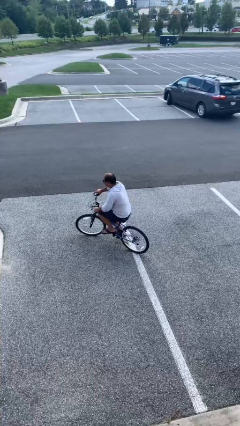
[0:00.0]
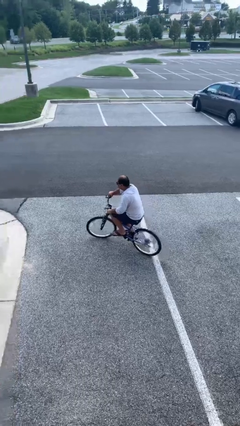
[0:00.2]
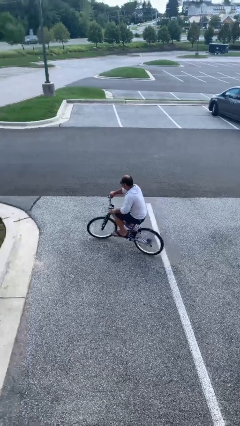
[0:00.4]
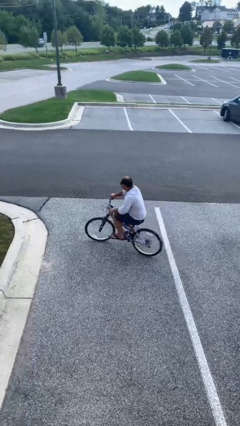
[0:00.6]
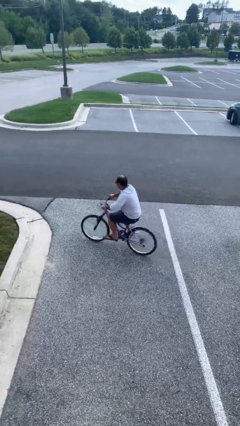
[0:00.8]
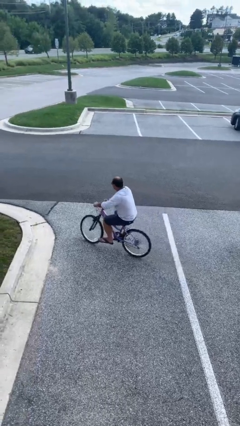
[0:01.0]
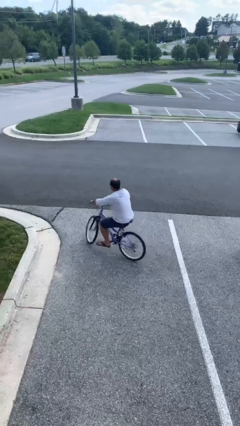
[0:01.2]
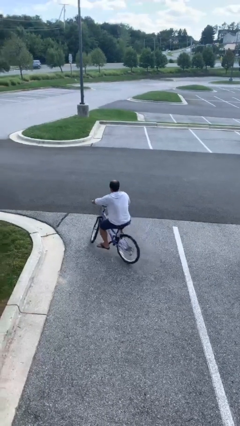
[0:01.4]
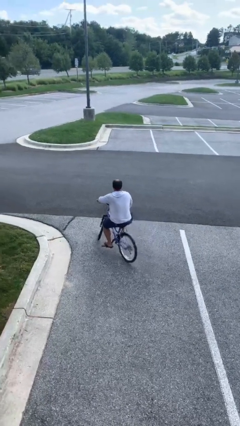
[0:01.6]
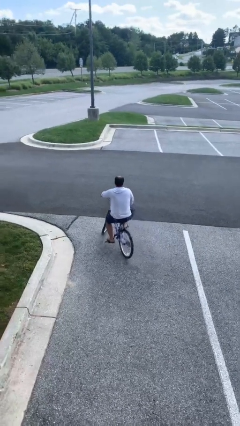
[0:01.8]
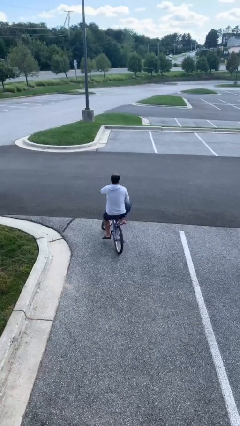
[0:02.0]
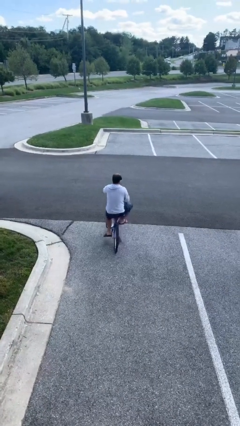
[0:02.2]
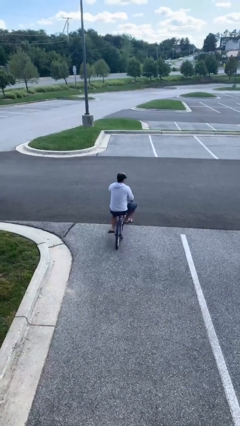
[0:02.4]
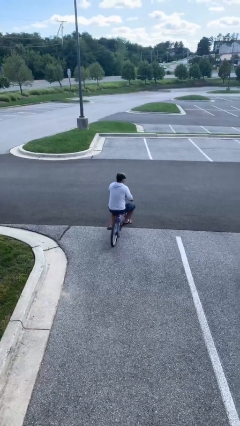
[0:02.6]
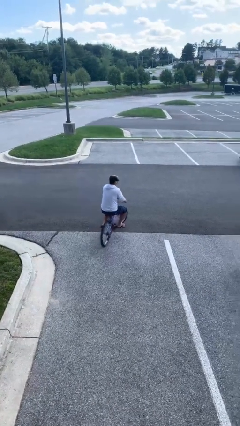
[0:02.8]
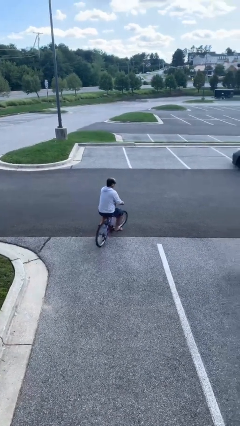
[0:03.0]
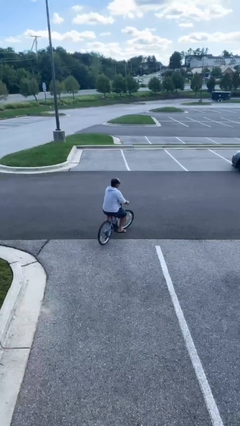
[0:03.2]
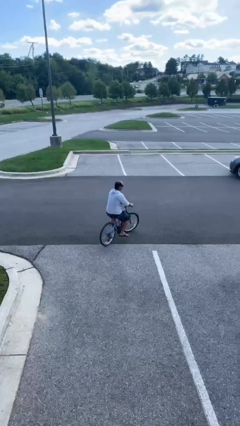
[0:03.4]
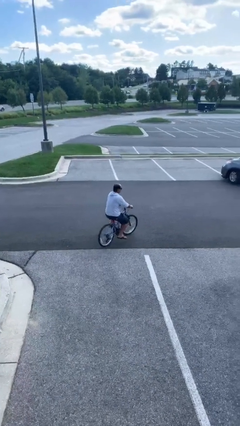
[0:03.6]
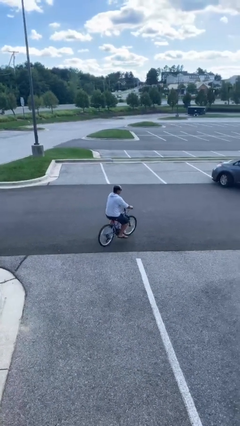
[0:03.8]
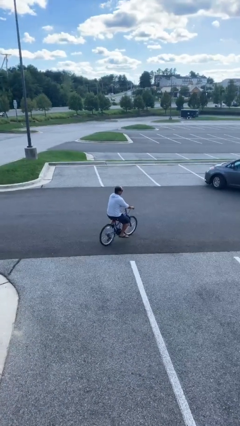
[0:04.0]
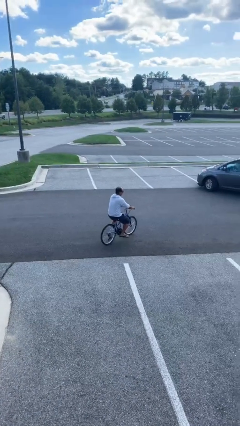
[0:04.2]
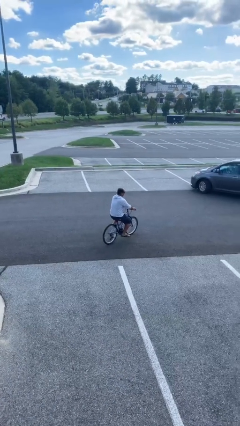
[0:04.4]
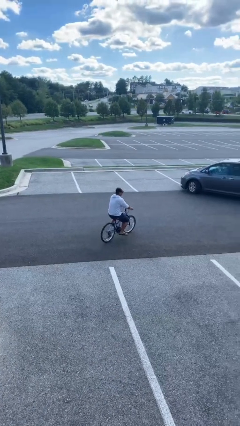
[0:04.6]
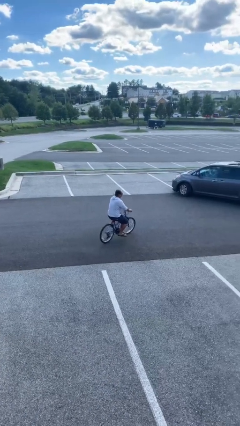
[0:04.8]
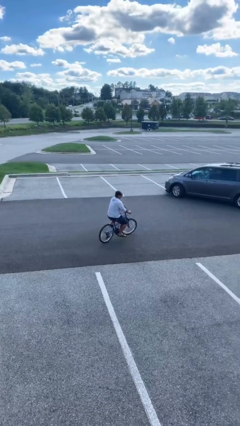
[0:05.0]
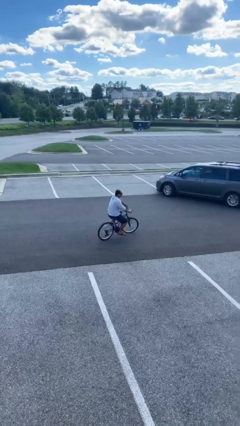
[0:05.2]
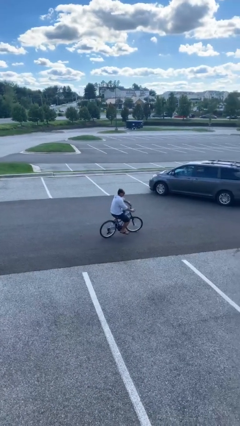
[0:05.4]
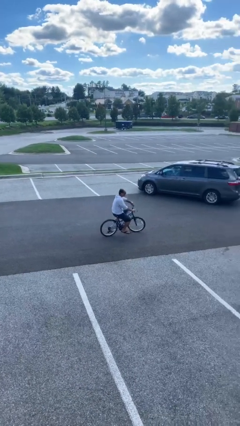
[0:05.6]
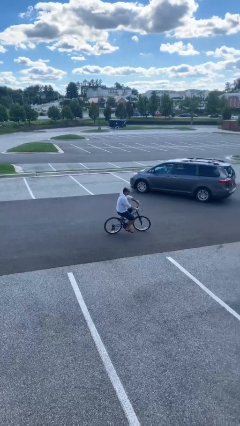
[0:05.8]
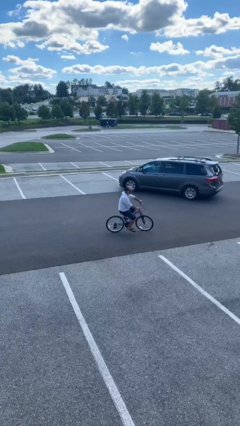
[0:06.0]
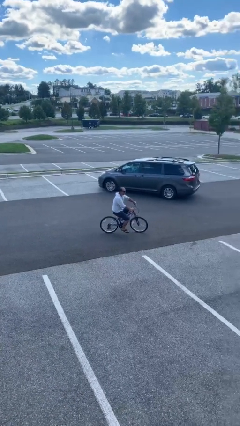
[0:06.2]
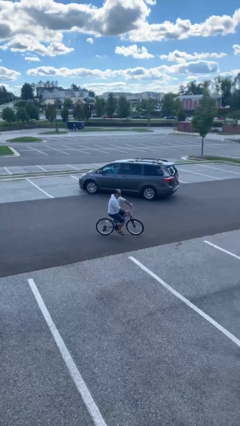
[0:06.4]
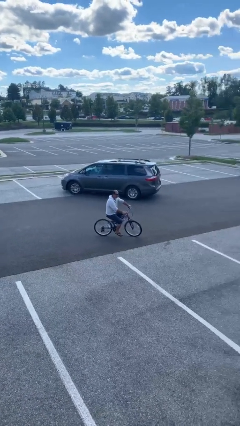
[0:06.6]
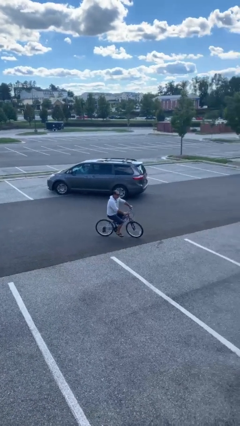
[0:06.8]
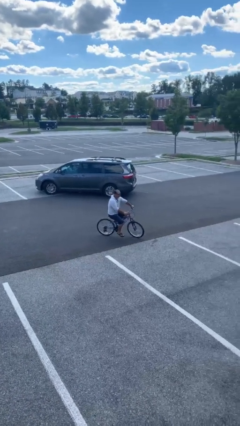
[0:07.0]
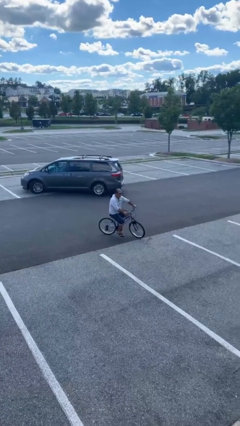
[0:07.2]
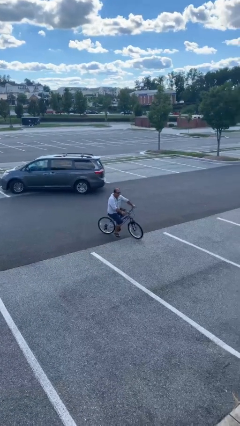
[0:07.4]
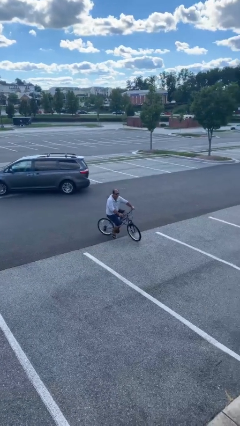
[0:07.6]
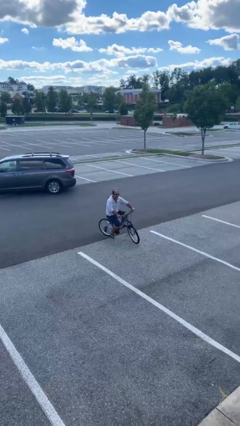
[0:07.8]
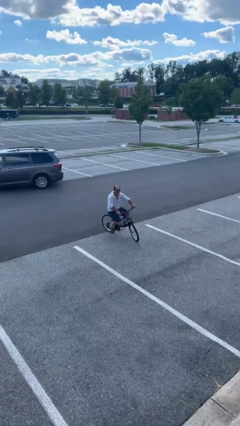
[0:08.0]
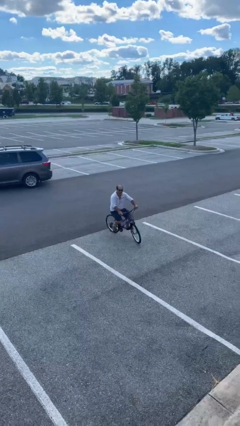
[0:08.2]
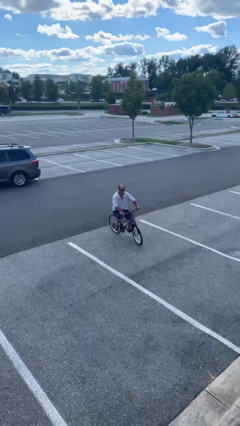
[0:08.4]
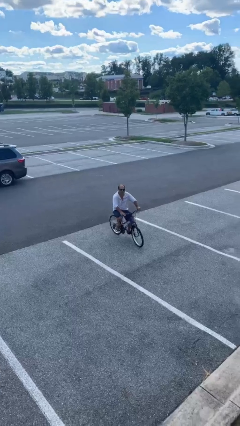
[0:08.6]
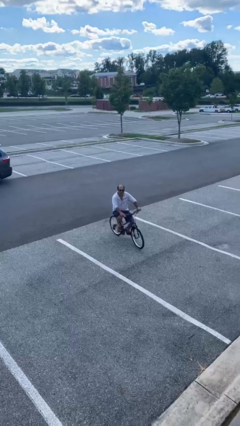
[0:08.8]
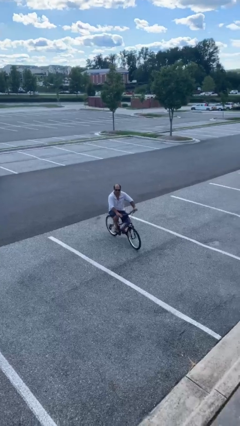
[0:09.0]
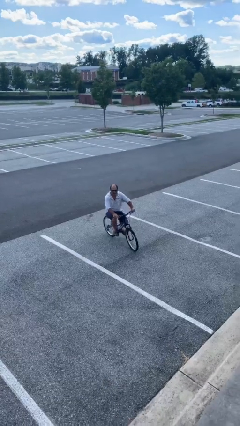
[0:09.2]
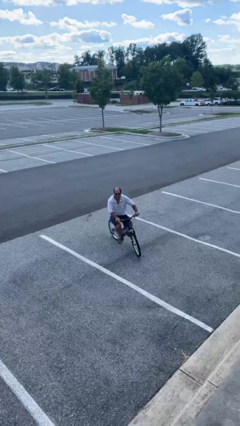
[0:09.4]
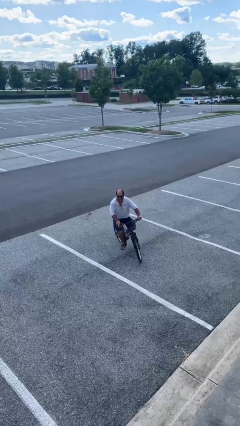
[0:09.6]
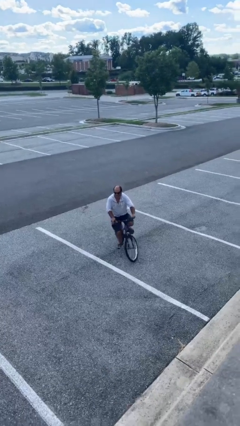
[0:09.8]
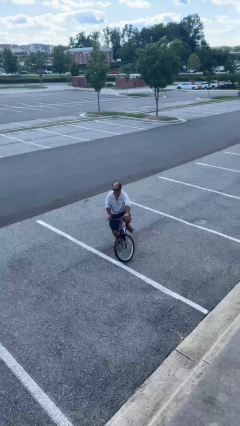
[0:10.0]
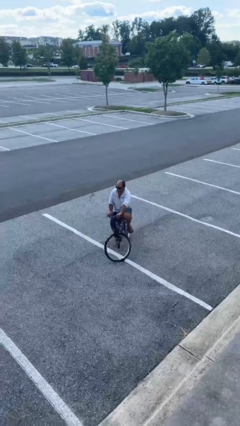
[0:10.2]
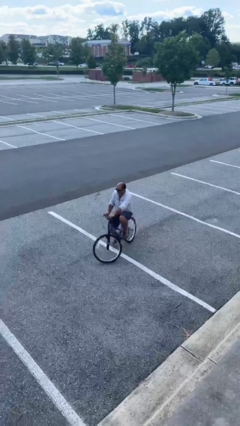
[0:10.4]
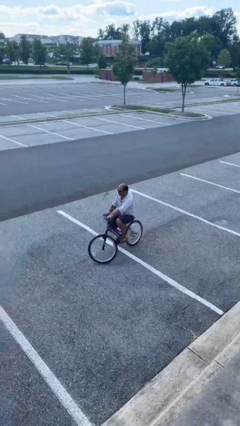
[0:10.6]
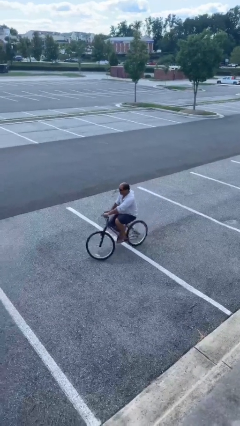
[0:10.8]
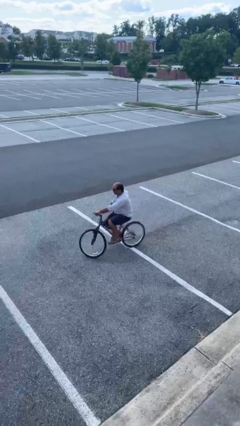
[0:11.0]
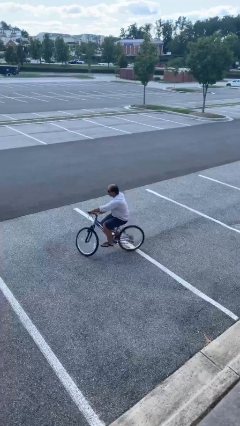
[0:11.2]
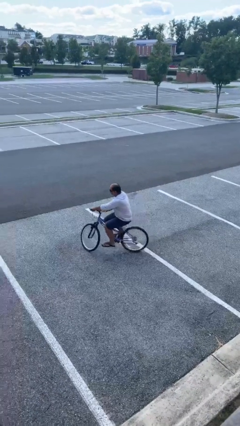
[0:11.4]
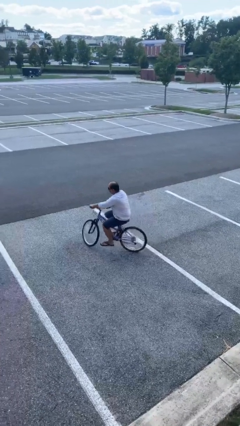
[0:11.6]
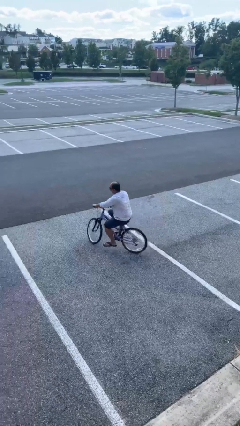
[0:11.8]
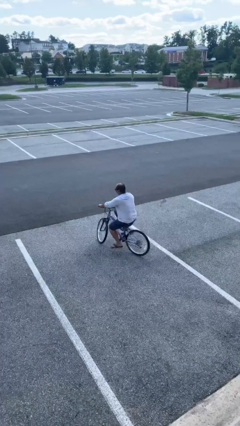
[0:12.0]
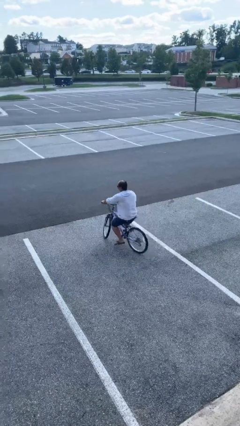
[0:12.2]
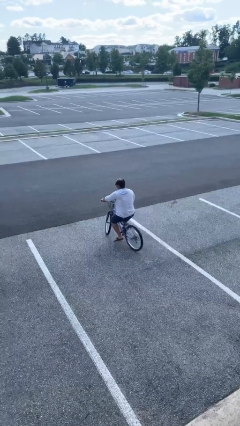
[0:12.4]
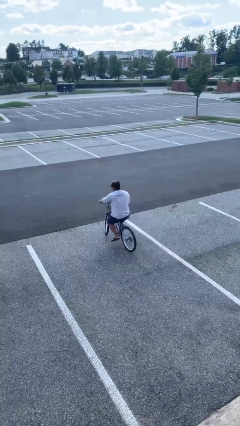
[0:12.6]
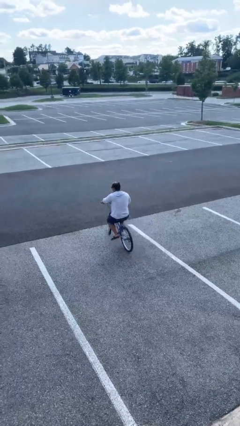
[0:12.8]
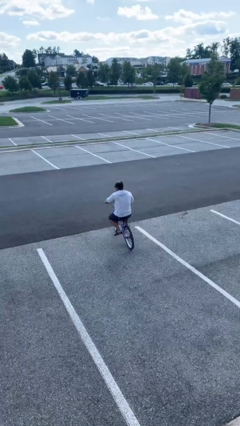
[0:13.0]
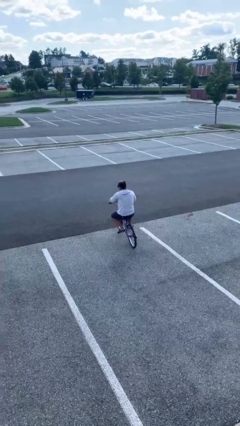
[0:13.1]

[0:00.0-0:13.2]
person rides bicycle

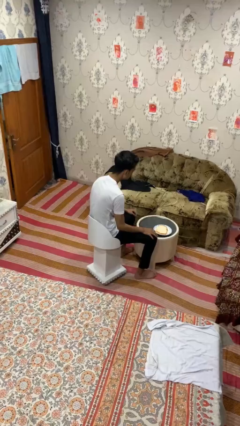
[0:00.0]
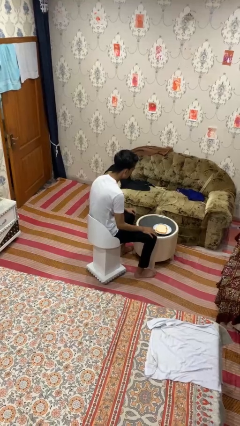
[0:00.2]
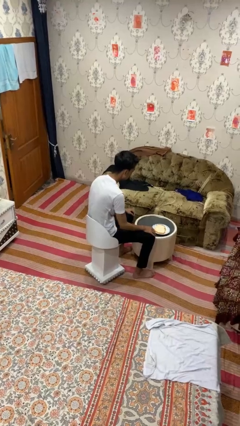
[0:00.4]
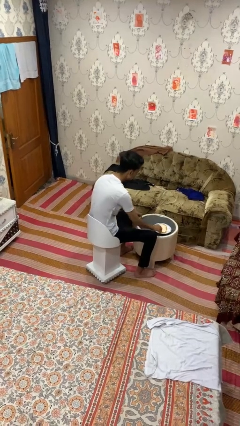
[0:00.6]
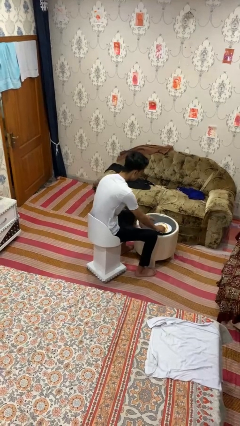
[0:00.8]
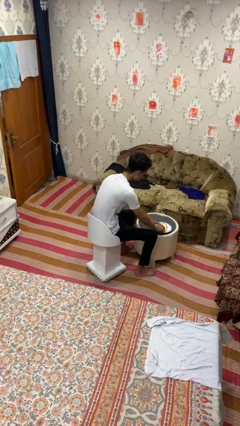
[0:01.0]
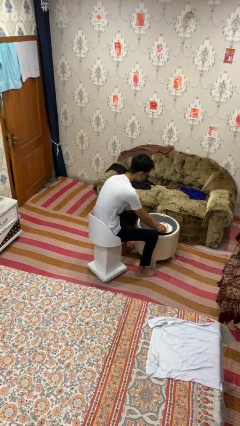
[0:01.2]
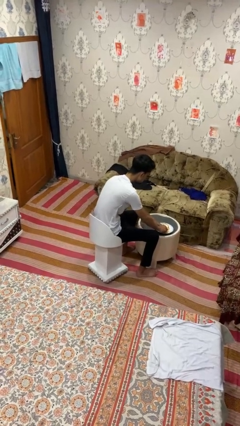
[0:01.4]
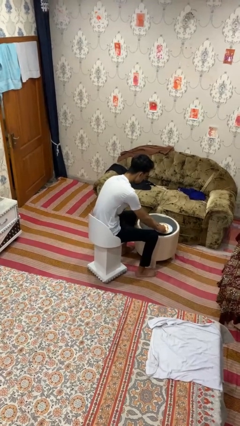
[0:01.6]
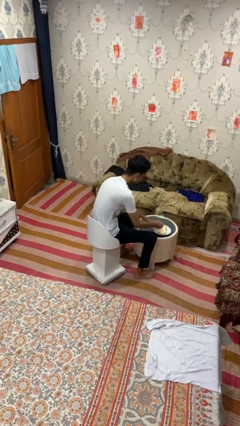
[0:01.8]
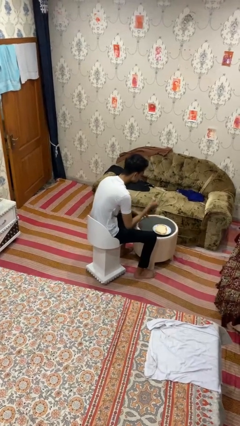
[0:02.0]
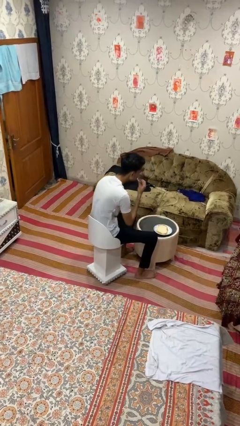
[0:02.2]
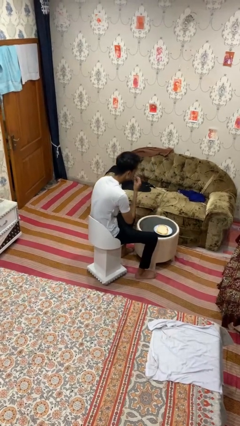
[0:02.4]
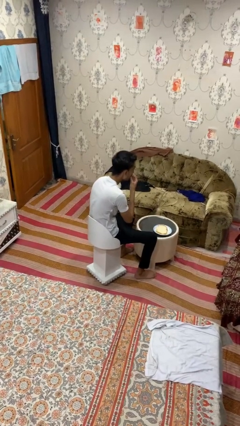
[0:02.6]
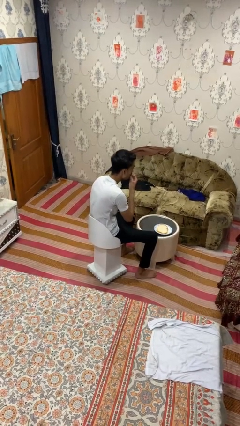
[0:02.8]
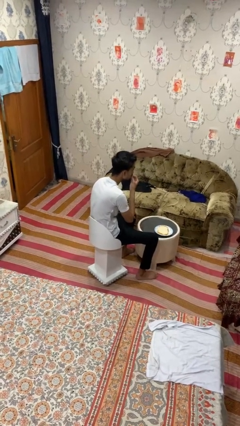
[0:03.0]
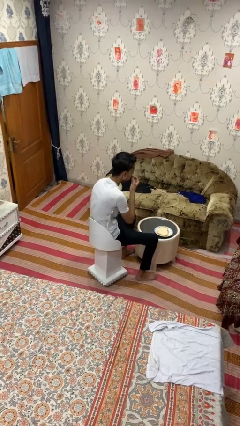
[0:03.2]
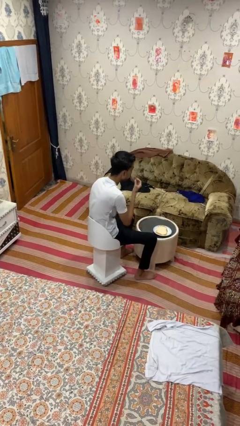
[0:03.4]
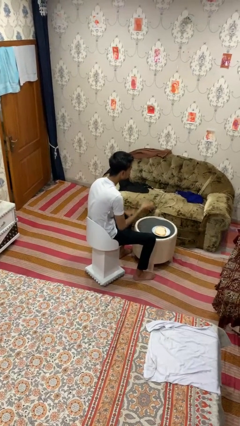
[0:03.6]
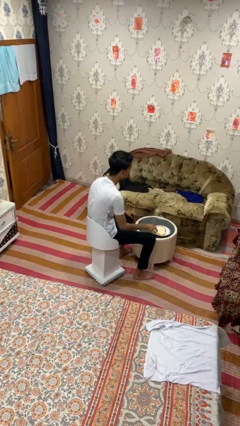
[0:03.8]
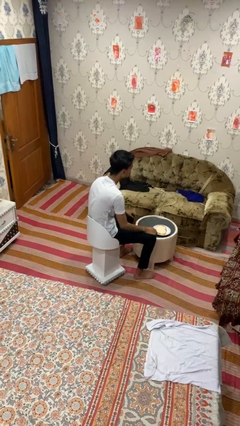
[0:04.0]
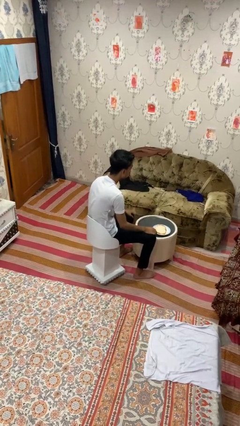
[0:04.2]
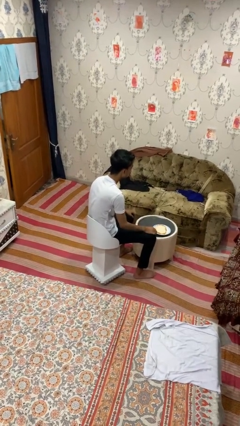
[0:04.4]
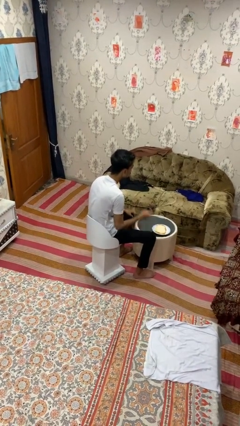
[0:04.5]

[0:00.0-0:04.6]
person eats with hands

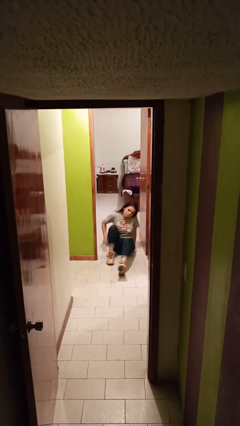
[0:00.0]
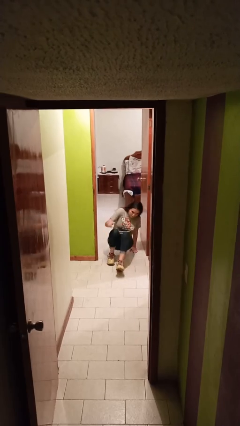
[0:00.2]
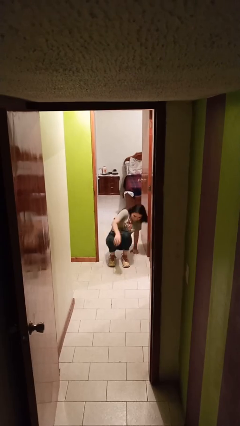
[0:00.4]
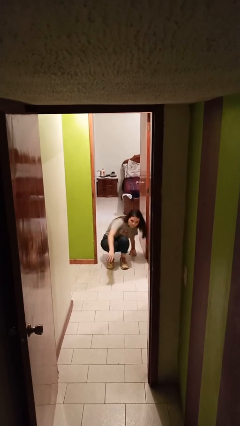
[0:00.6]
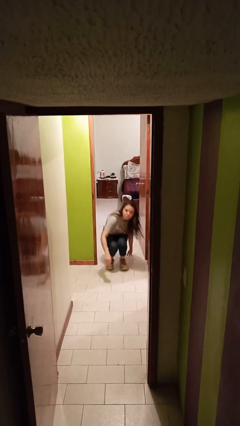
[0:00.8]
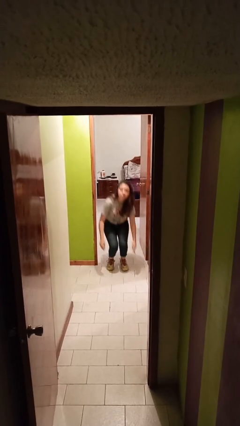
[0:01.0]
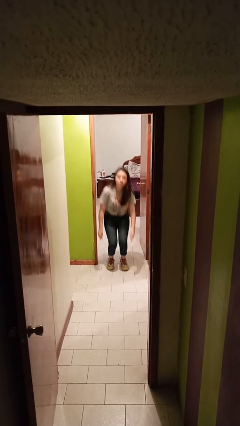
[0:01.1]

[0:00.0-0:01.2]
person stands up
